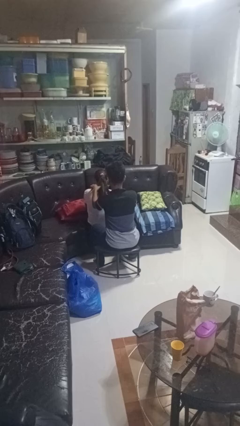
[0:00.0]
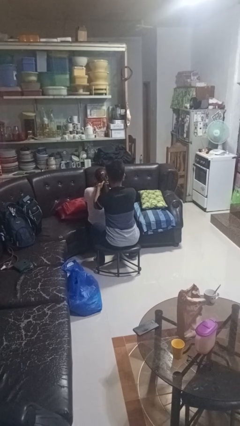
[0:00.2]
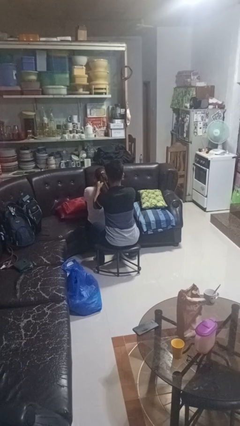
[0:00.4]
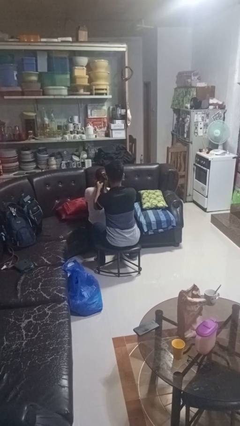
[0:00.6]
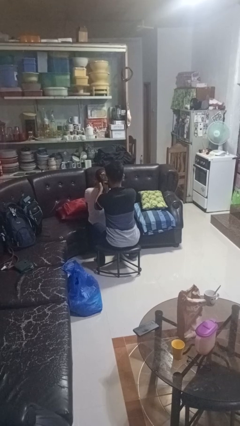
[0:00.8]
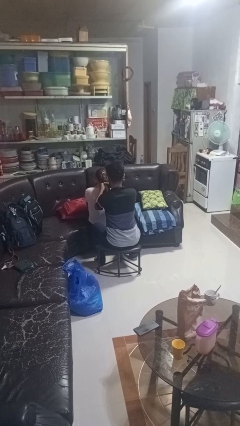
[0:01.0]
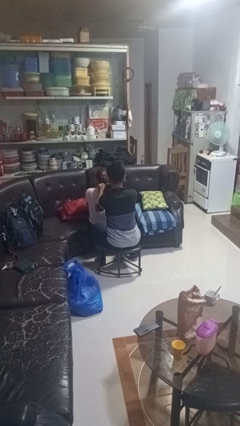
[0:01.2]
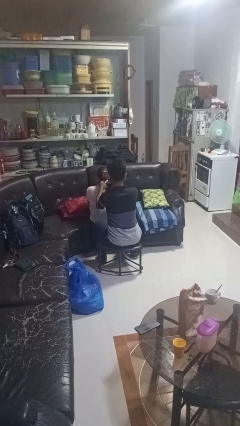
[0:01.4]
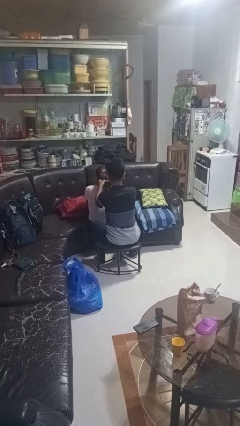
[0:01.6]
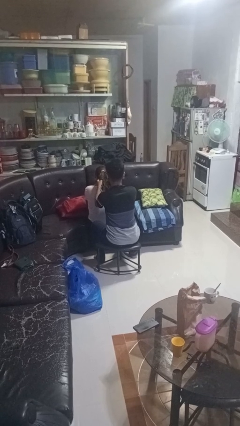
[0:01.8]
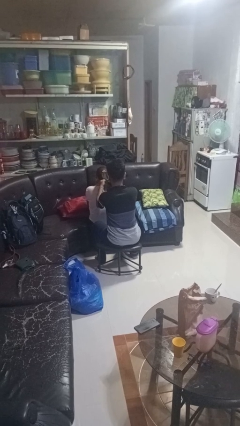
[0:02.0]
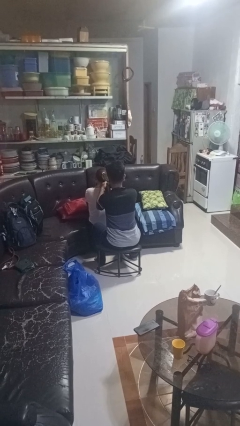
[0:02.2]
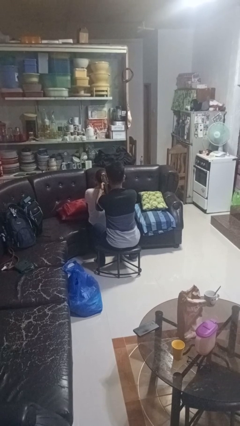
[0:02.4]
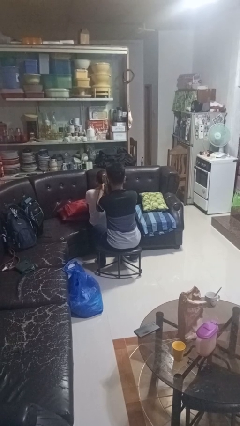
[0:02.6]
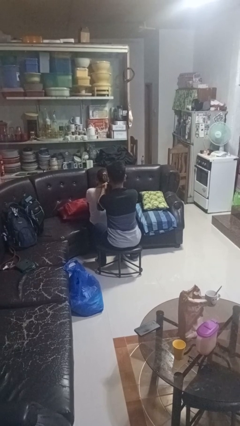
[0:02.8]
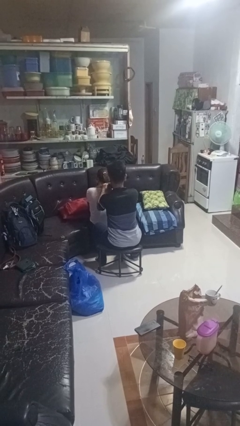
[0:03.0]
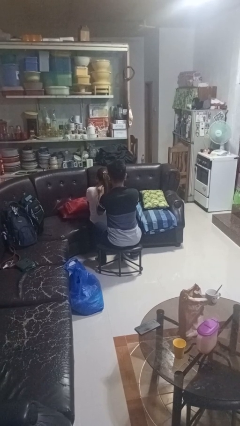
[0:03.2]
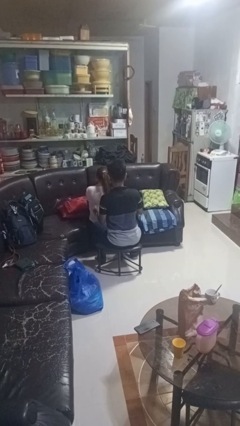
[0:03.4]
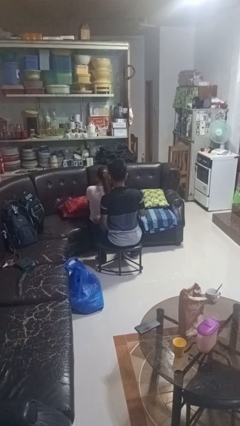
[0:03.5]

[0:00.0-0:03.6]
person braids hair of person

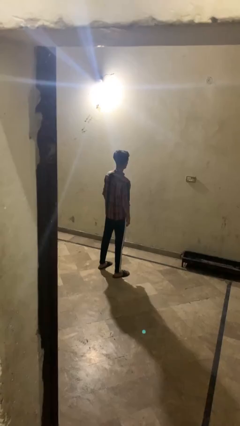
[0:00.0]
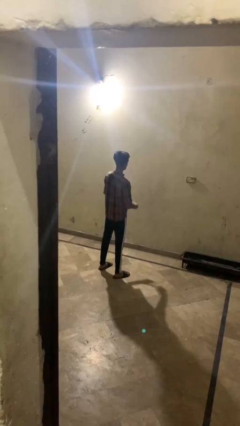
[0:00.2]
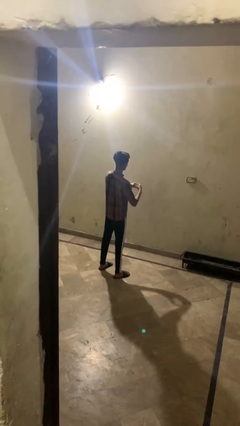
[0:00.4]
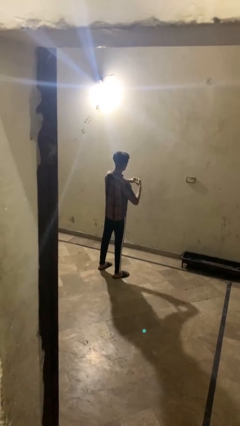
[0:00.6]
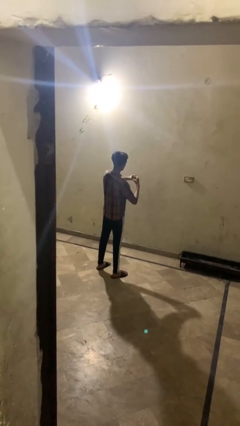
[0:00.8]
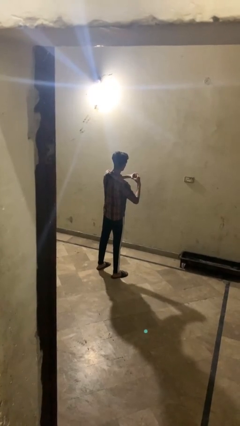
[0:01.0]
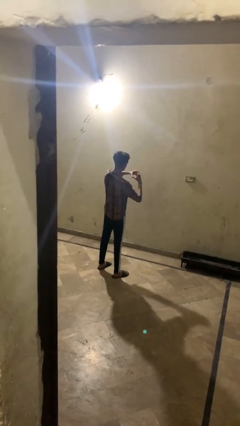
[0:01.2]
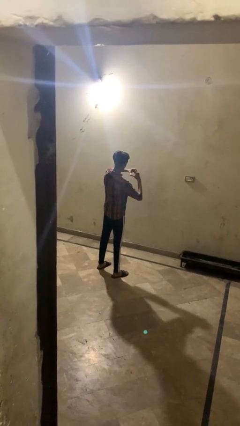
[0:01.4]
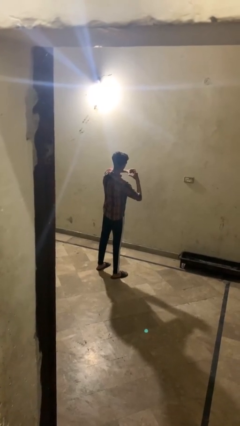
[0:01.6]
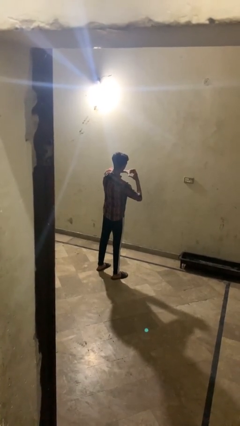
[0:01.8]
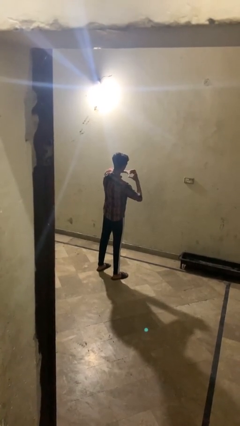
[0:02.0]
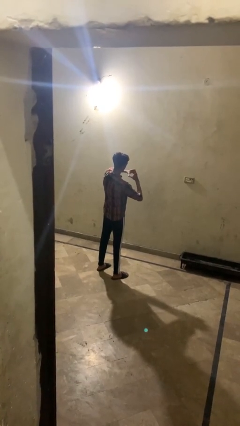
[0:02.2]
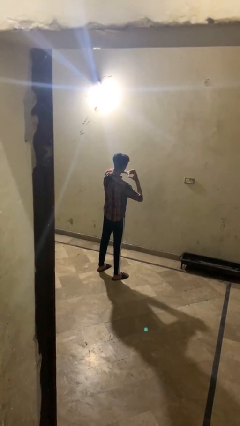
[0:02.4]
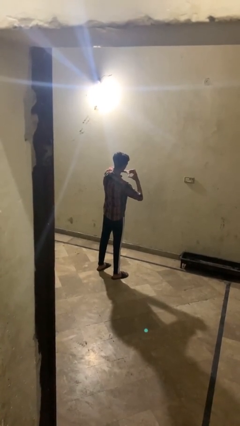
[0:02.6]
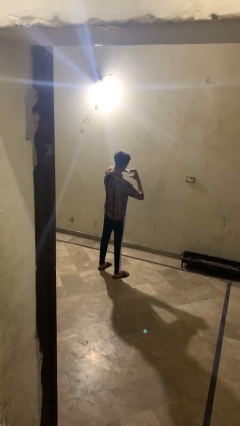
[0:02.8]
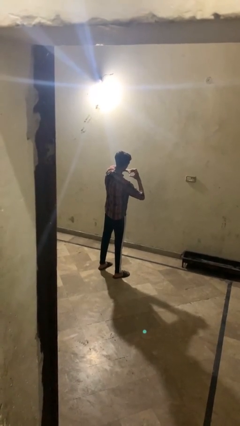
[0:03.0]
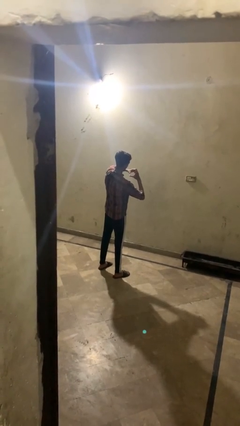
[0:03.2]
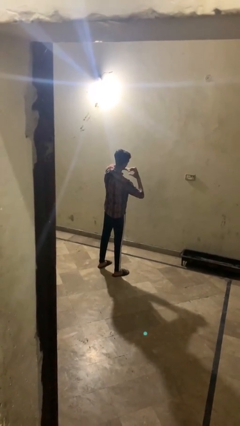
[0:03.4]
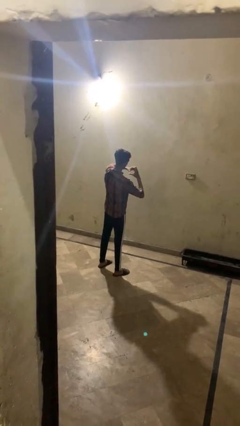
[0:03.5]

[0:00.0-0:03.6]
person gestures heart

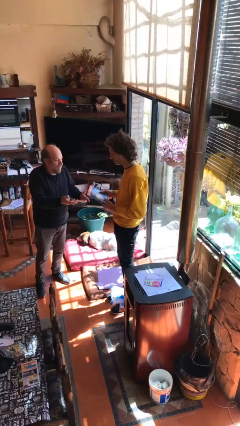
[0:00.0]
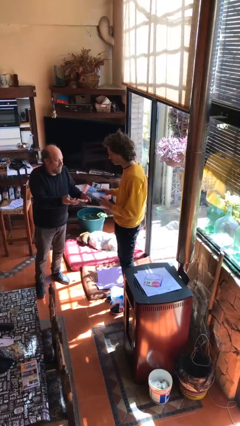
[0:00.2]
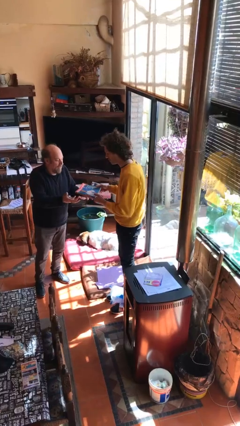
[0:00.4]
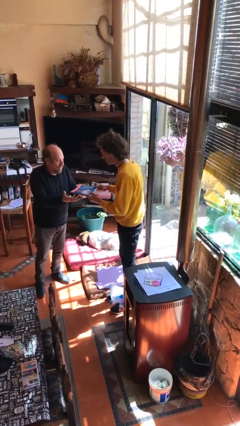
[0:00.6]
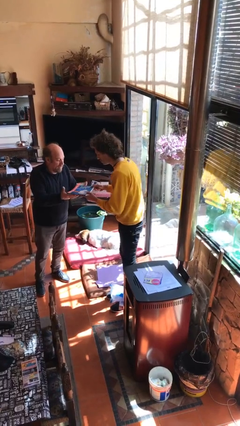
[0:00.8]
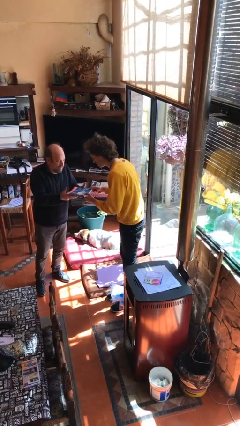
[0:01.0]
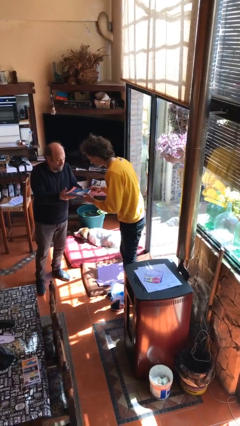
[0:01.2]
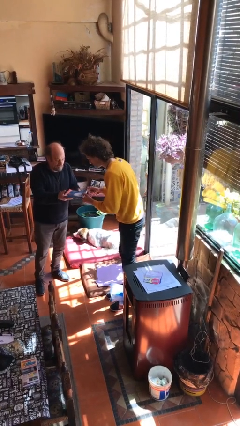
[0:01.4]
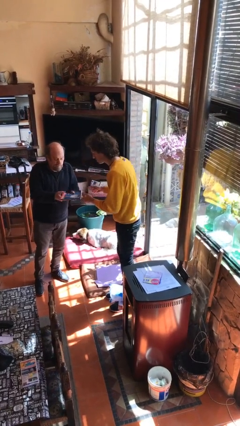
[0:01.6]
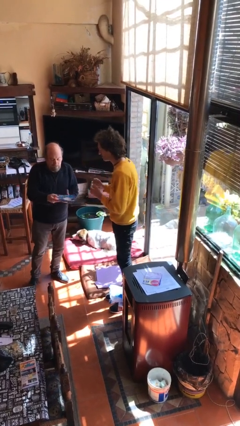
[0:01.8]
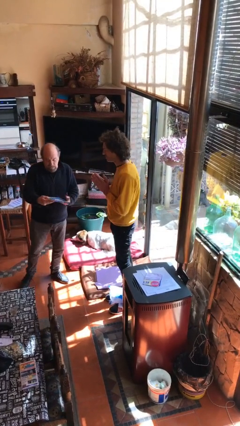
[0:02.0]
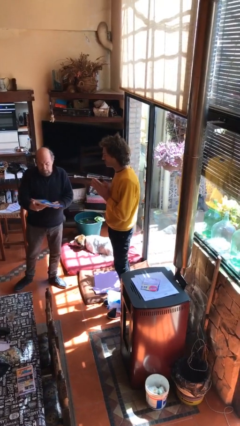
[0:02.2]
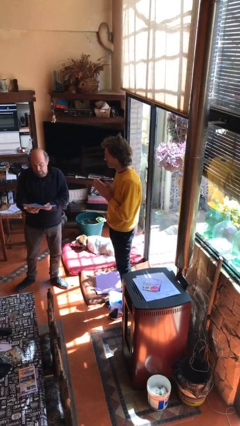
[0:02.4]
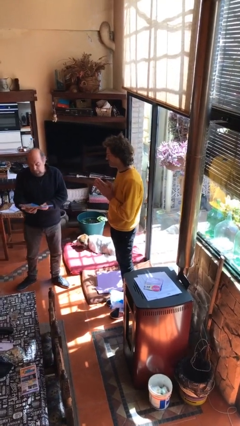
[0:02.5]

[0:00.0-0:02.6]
person transfers object to person

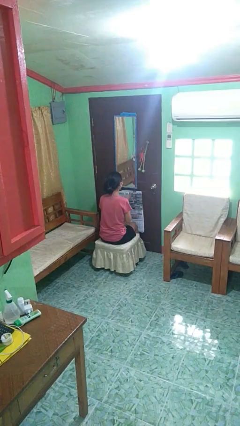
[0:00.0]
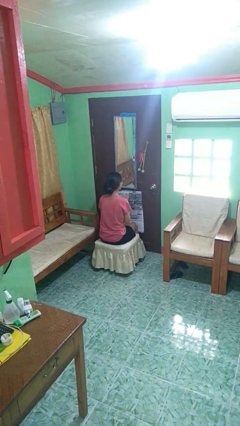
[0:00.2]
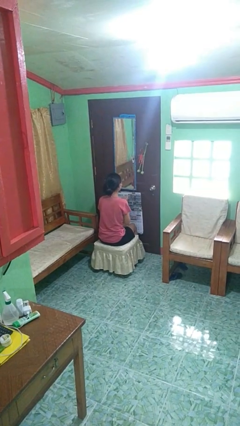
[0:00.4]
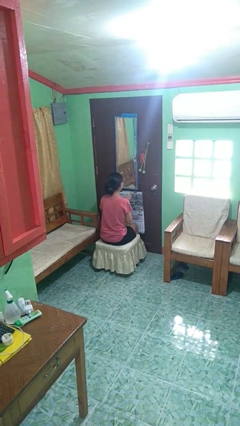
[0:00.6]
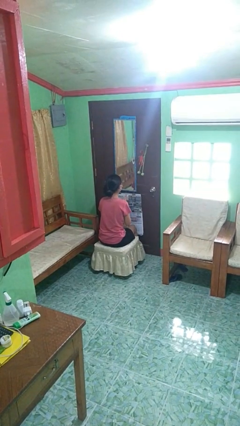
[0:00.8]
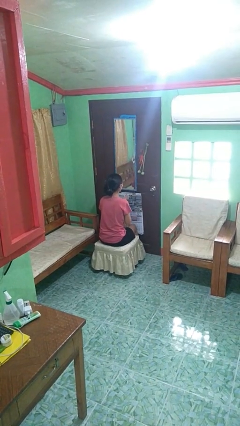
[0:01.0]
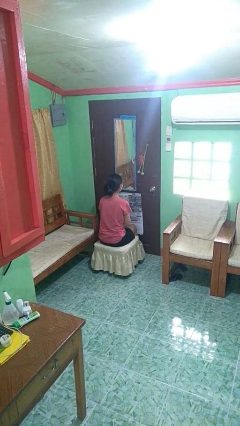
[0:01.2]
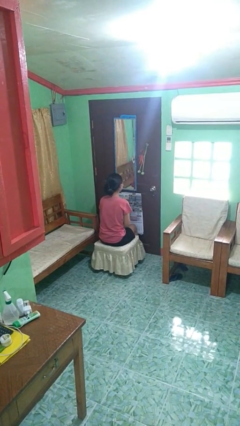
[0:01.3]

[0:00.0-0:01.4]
person claps hands

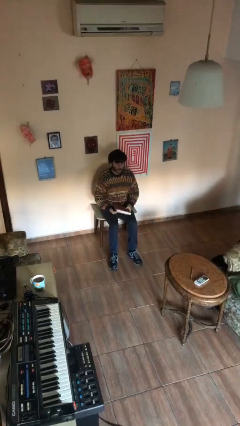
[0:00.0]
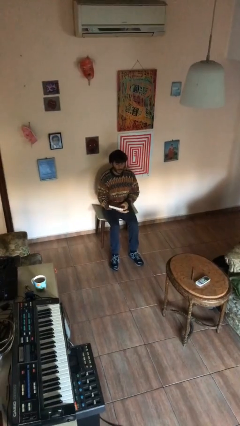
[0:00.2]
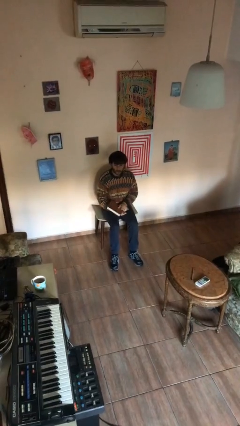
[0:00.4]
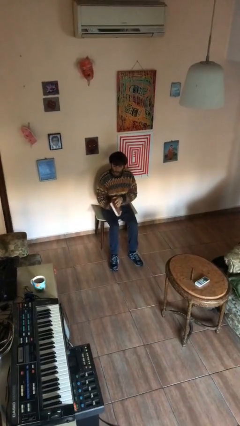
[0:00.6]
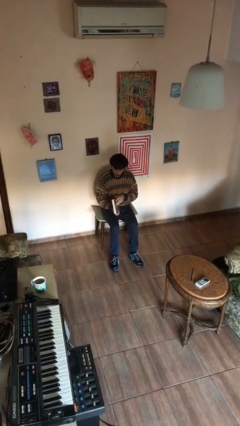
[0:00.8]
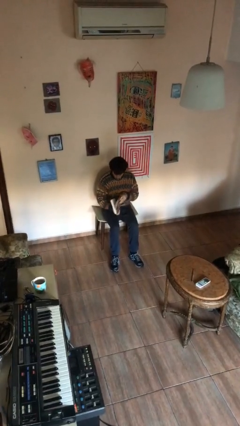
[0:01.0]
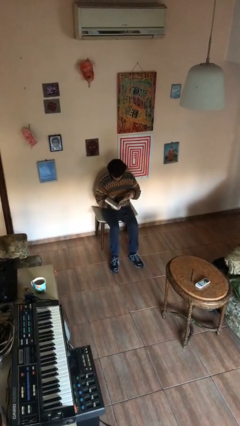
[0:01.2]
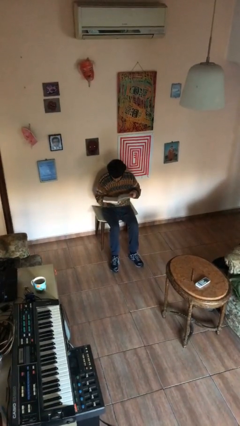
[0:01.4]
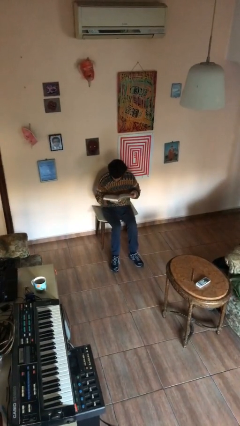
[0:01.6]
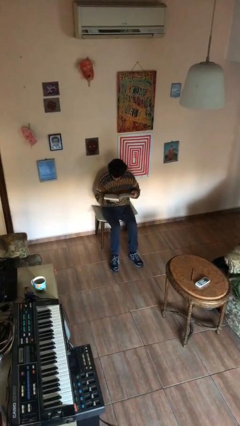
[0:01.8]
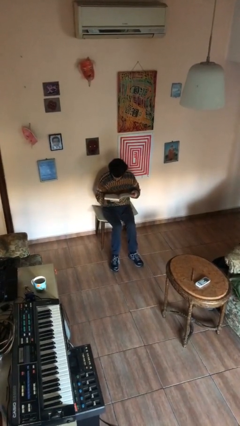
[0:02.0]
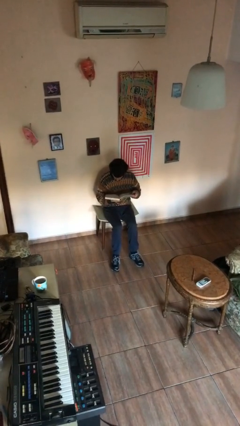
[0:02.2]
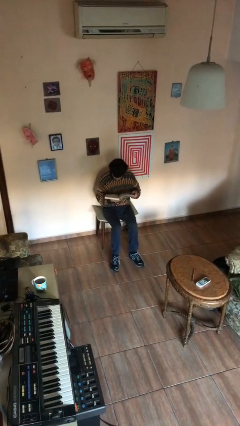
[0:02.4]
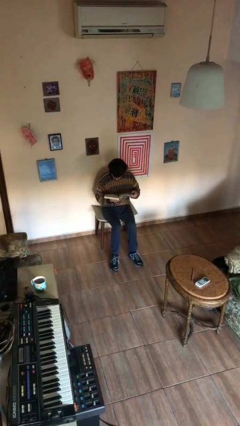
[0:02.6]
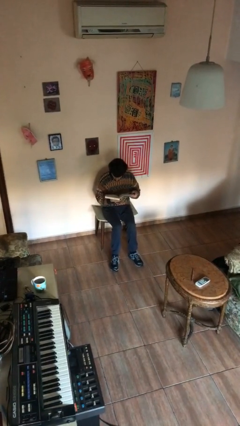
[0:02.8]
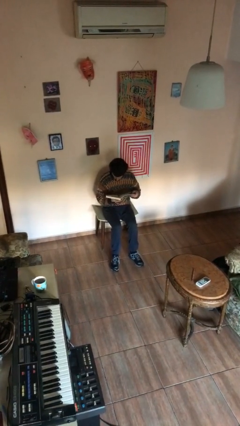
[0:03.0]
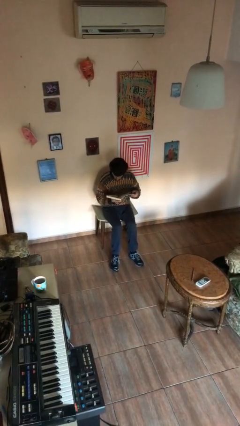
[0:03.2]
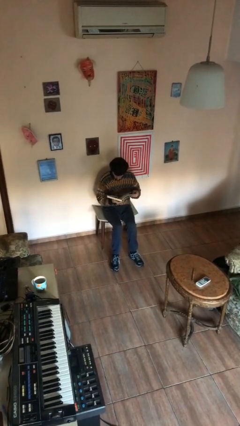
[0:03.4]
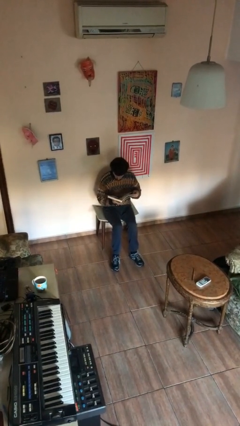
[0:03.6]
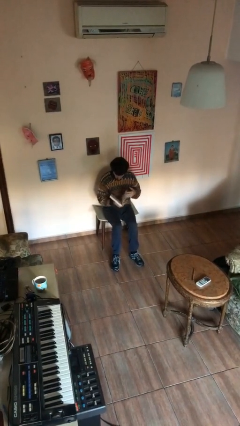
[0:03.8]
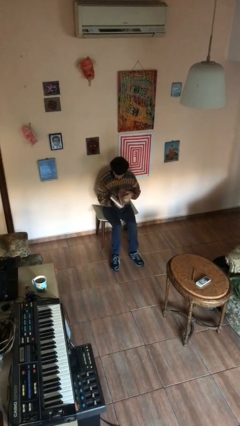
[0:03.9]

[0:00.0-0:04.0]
person reads book

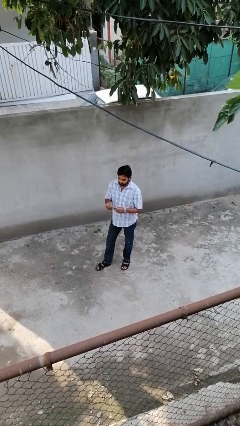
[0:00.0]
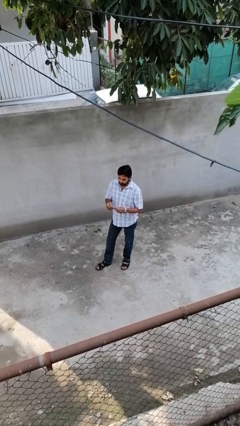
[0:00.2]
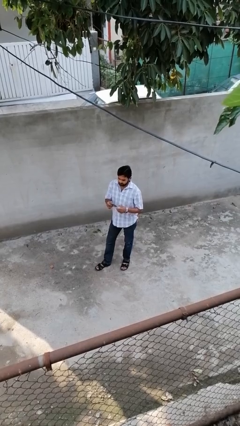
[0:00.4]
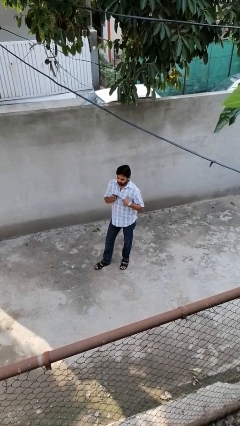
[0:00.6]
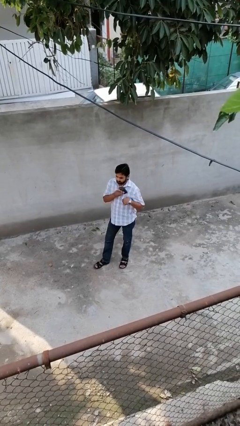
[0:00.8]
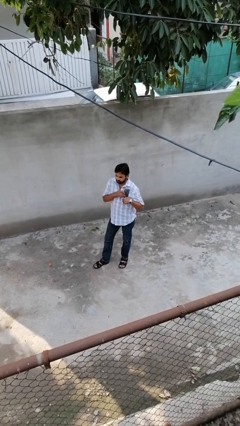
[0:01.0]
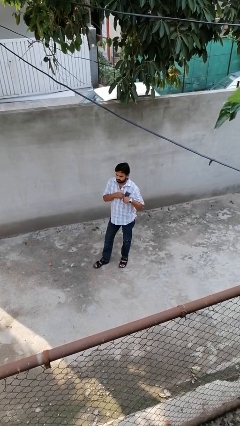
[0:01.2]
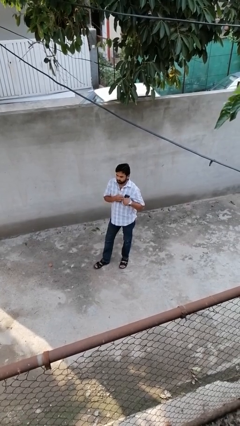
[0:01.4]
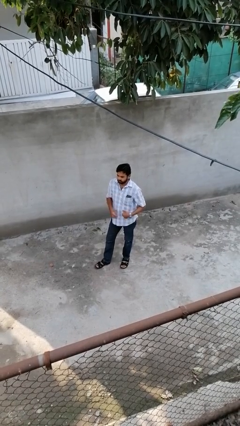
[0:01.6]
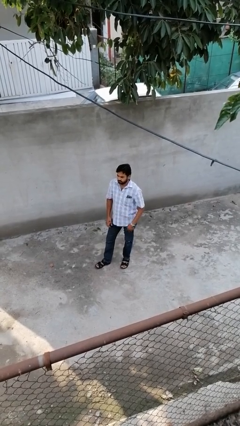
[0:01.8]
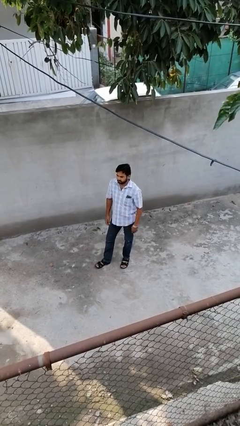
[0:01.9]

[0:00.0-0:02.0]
person puts phone into pocket
